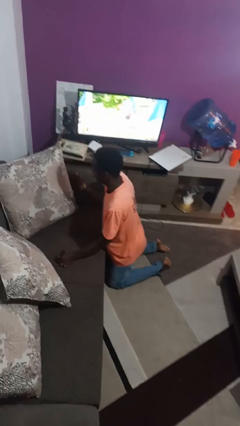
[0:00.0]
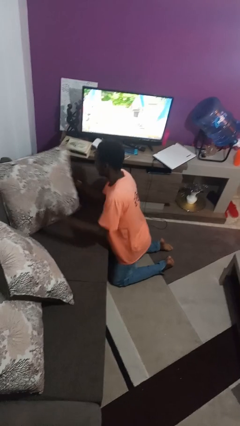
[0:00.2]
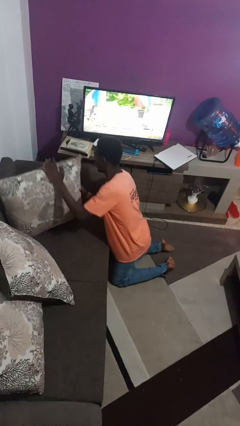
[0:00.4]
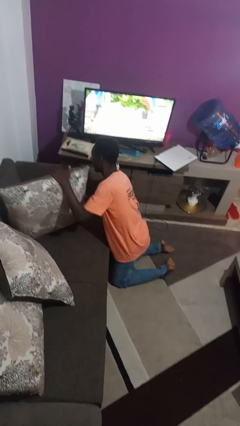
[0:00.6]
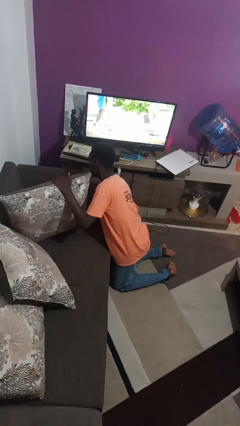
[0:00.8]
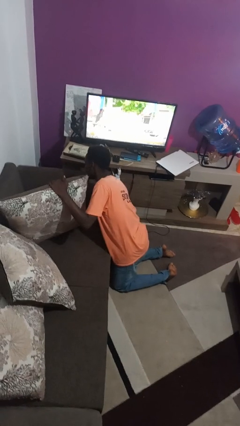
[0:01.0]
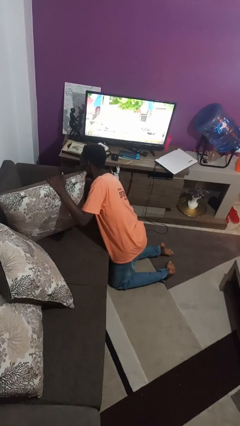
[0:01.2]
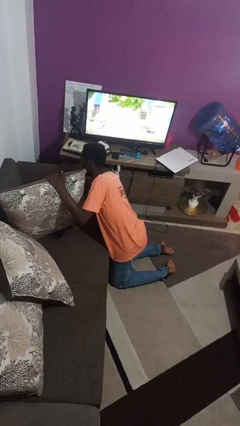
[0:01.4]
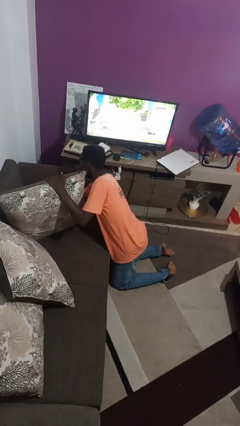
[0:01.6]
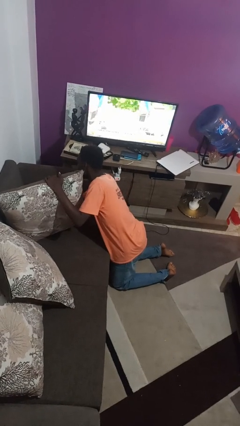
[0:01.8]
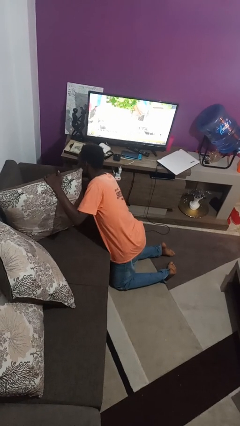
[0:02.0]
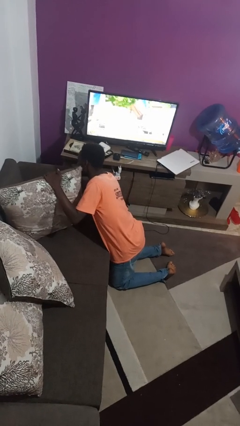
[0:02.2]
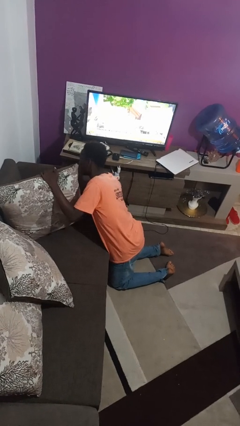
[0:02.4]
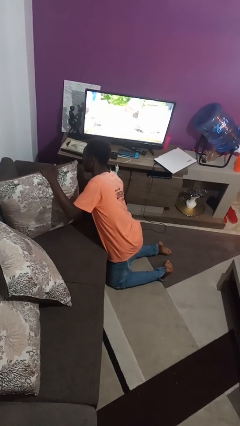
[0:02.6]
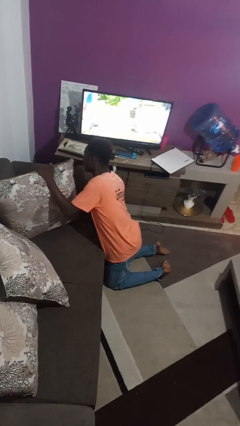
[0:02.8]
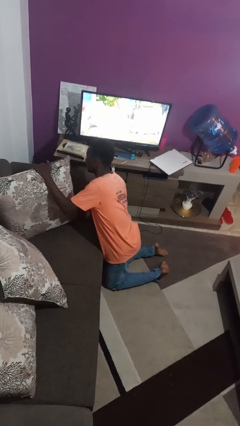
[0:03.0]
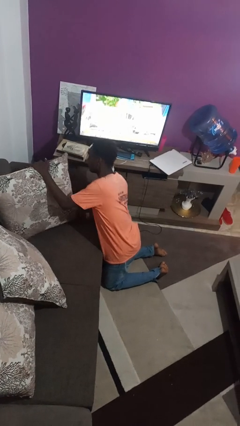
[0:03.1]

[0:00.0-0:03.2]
person searches in couch

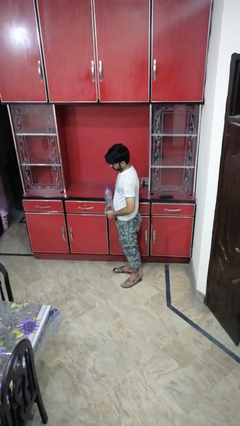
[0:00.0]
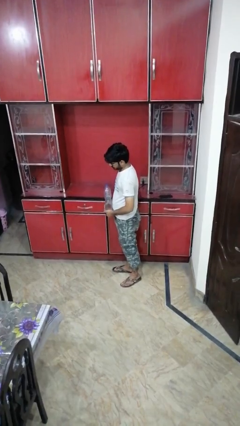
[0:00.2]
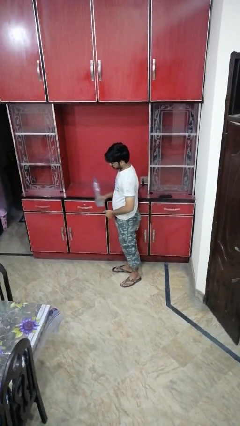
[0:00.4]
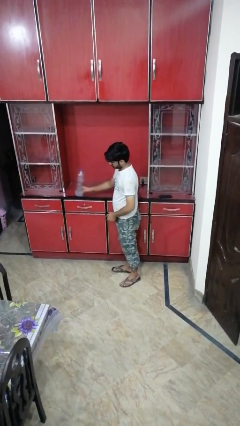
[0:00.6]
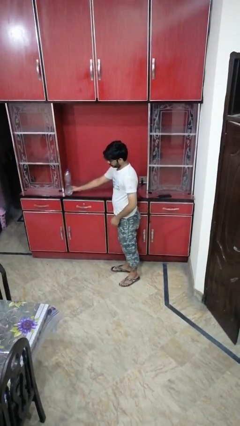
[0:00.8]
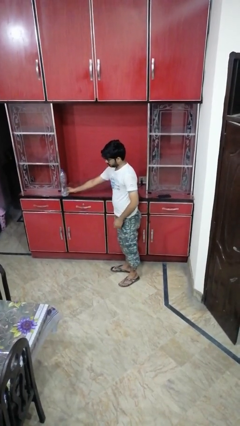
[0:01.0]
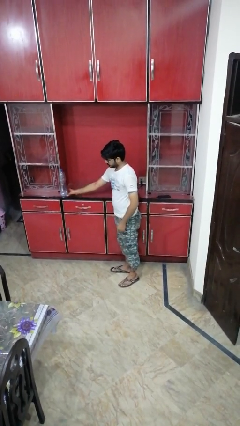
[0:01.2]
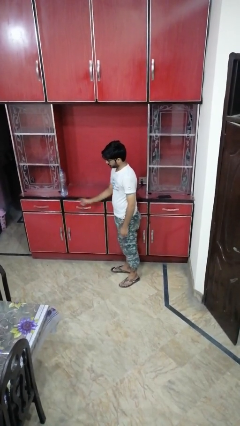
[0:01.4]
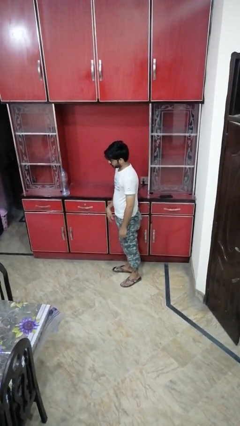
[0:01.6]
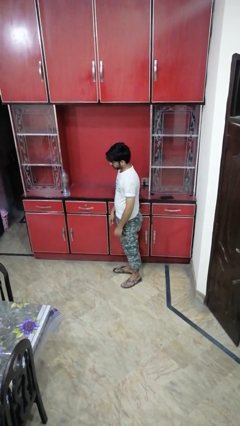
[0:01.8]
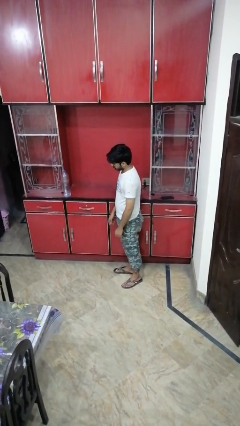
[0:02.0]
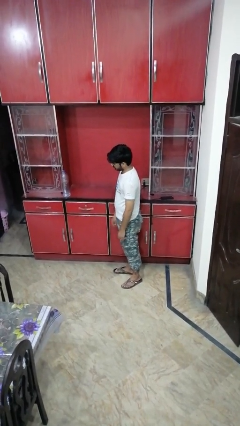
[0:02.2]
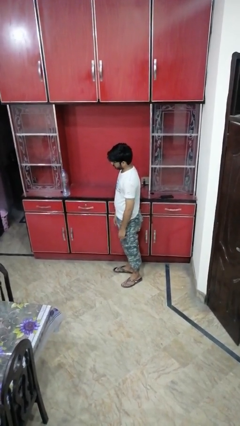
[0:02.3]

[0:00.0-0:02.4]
person puts down object on countertop

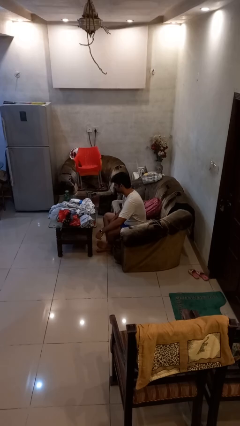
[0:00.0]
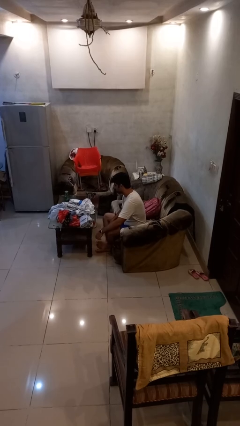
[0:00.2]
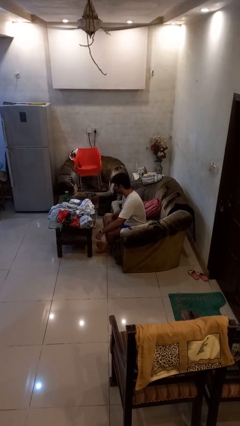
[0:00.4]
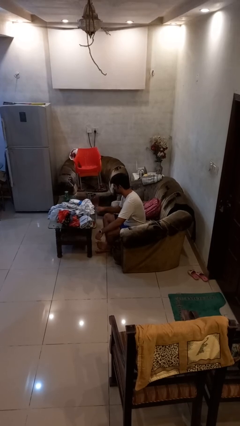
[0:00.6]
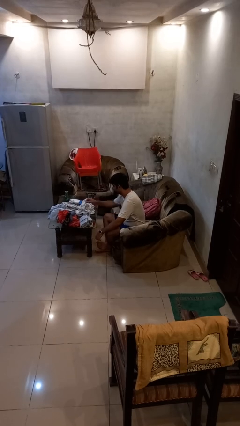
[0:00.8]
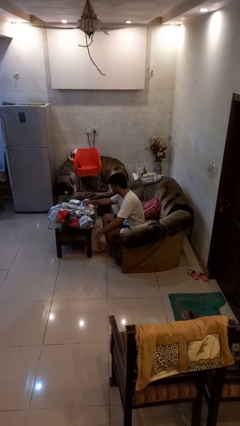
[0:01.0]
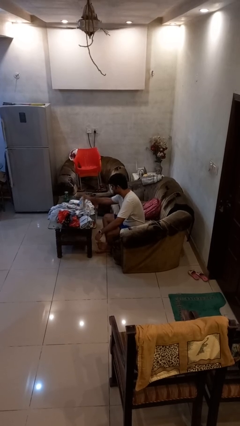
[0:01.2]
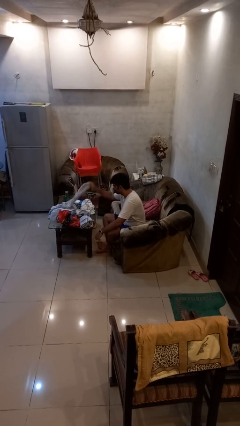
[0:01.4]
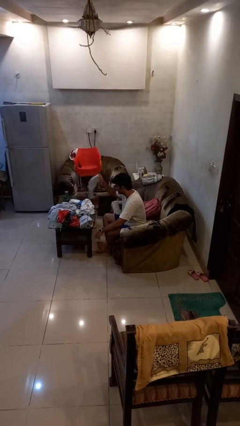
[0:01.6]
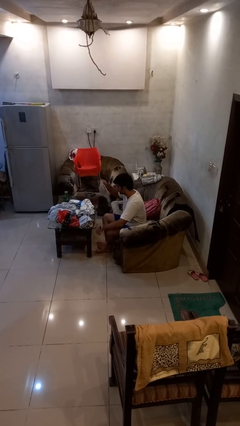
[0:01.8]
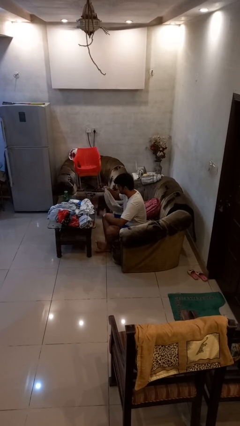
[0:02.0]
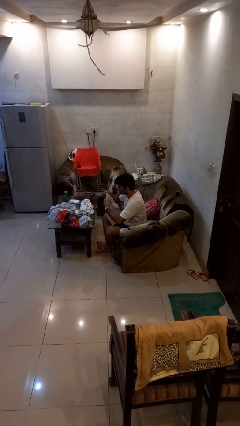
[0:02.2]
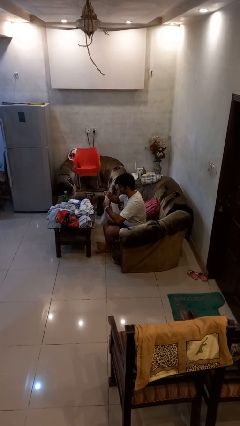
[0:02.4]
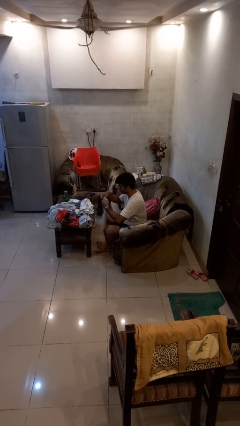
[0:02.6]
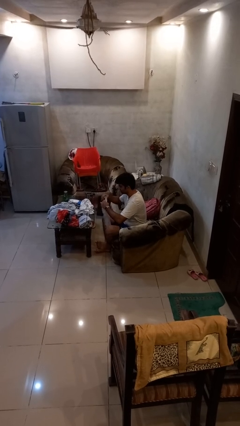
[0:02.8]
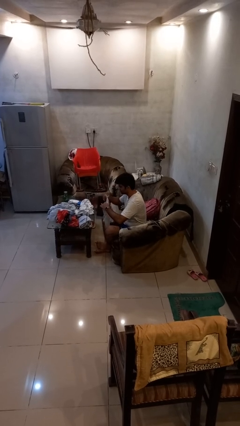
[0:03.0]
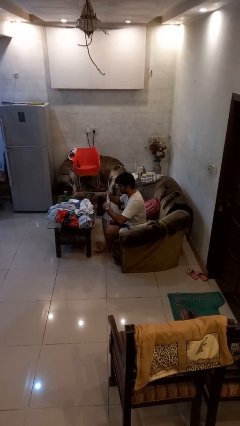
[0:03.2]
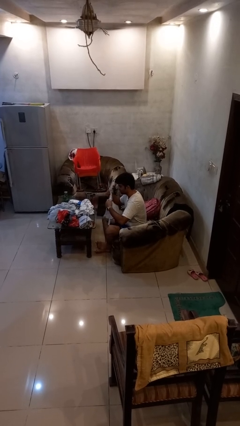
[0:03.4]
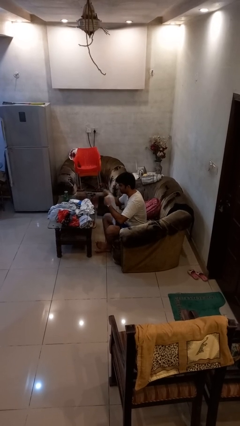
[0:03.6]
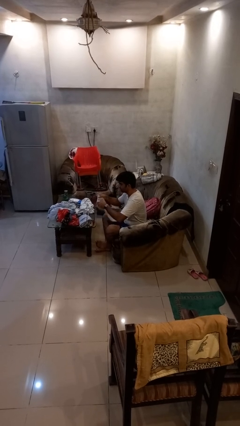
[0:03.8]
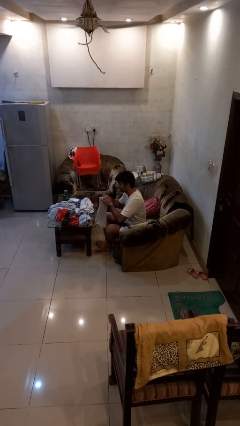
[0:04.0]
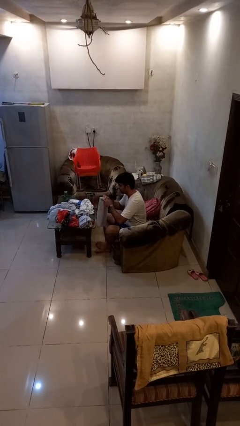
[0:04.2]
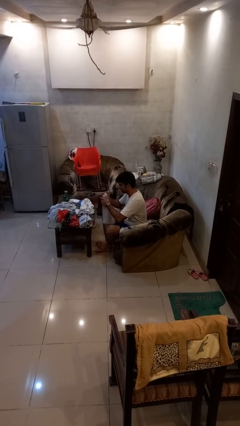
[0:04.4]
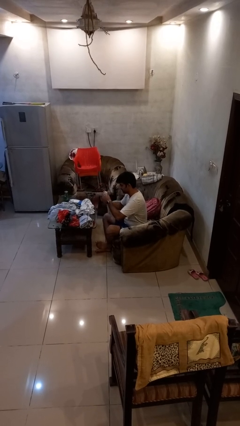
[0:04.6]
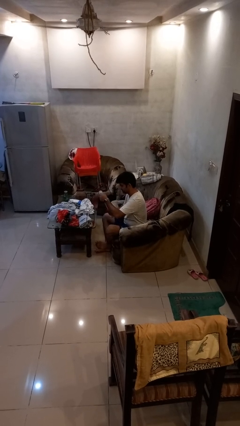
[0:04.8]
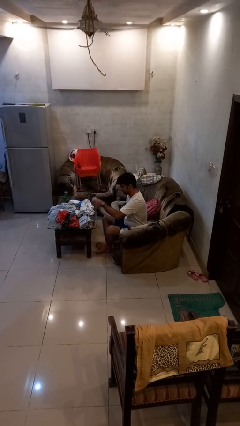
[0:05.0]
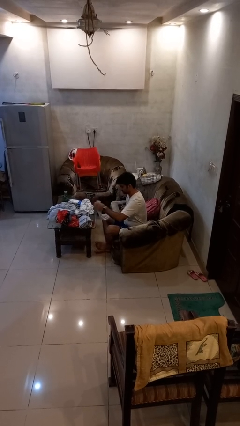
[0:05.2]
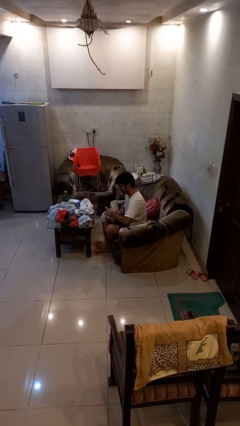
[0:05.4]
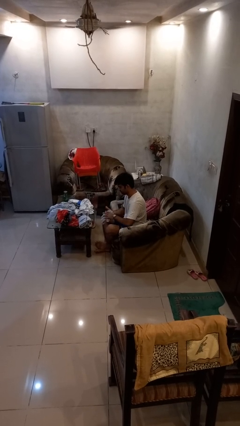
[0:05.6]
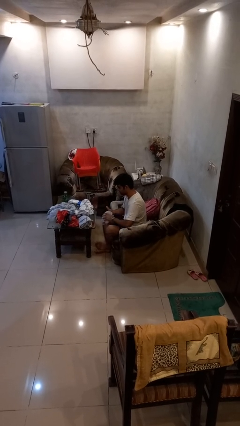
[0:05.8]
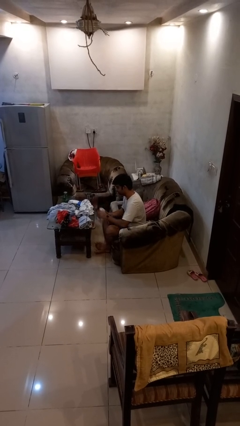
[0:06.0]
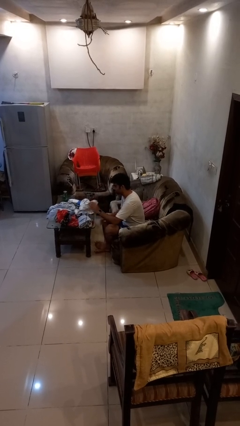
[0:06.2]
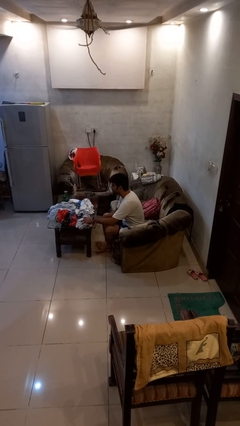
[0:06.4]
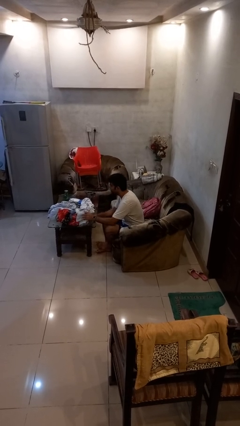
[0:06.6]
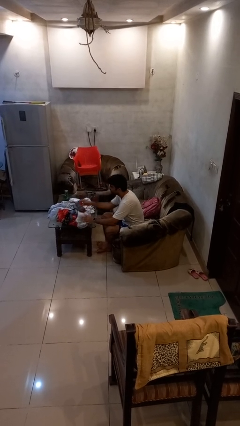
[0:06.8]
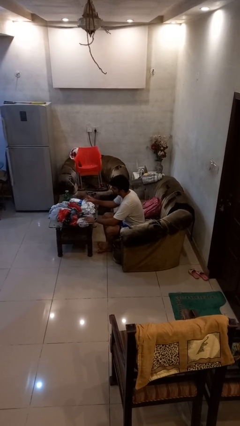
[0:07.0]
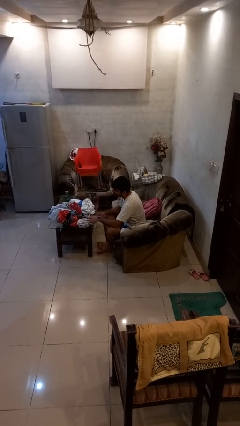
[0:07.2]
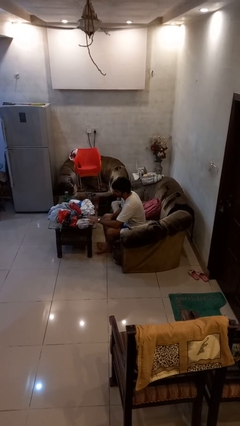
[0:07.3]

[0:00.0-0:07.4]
person folds pants

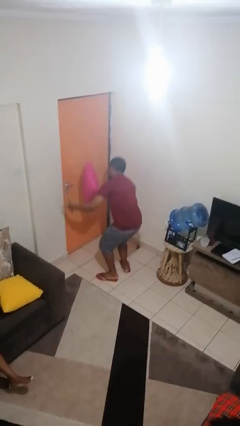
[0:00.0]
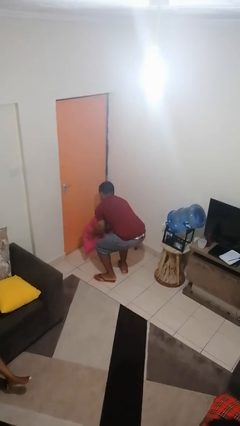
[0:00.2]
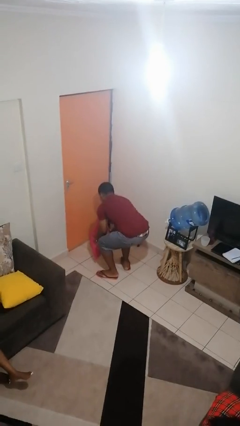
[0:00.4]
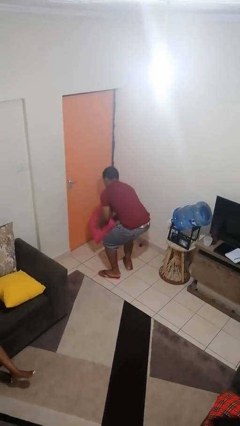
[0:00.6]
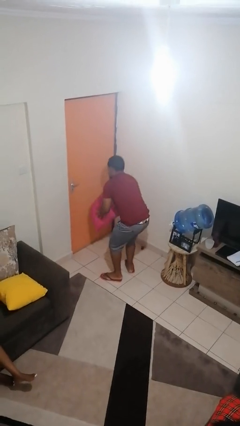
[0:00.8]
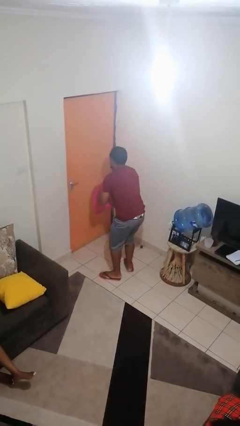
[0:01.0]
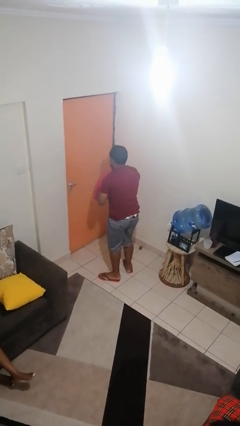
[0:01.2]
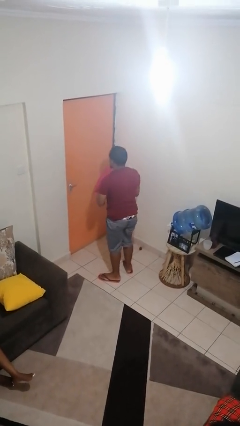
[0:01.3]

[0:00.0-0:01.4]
person catches dropped object

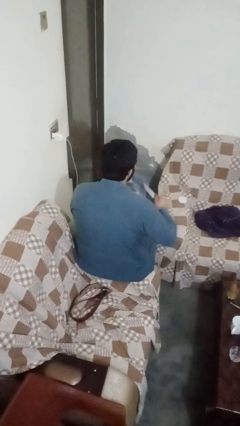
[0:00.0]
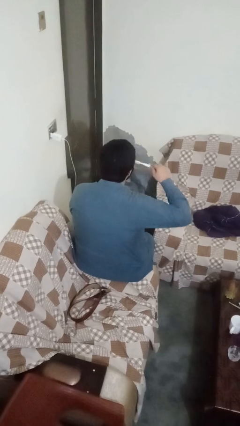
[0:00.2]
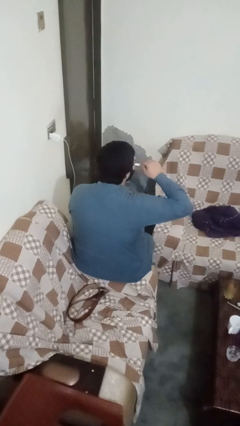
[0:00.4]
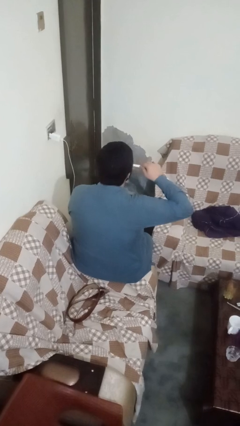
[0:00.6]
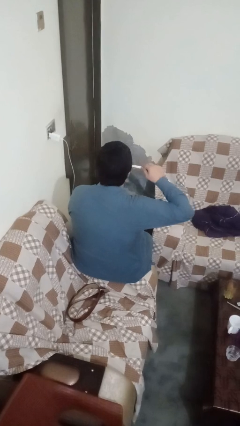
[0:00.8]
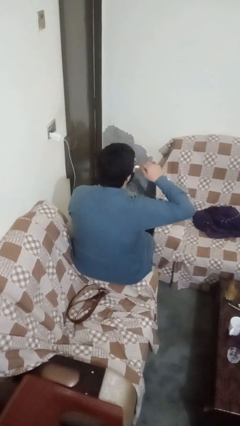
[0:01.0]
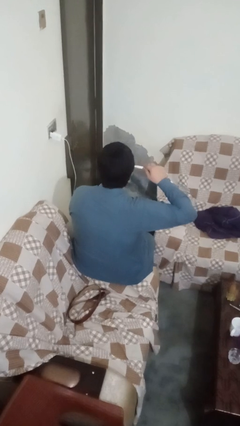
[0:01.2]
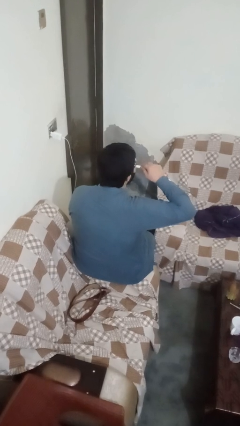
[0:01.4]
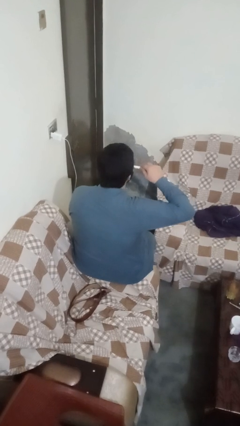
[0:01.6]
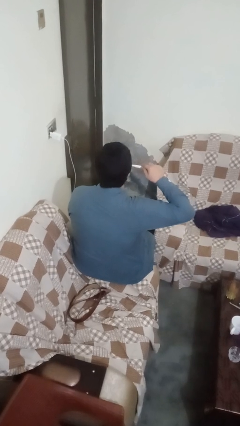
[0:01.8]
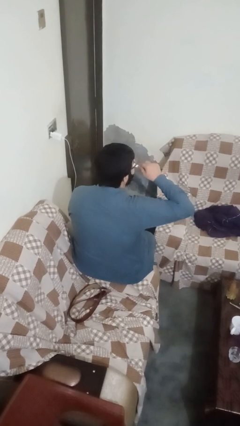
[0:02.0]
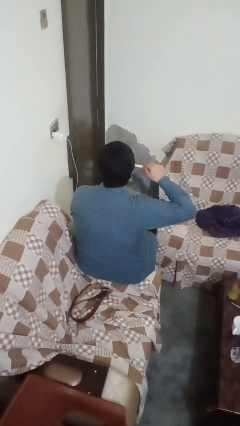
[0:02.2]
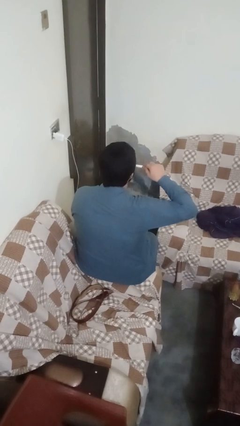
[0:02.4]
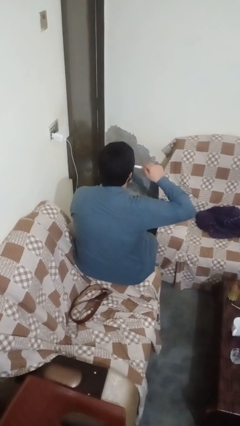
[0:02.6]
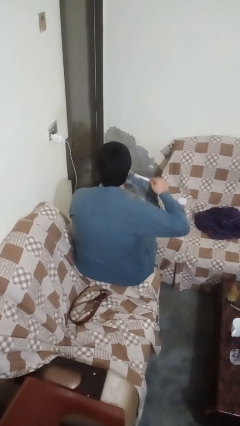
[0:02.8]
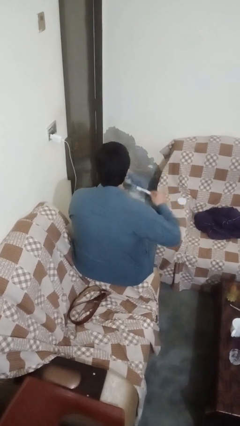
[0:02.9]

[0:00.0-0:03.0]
person brushes teeth

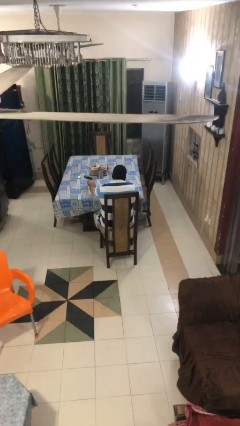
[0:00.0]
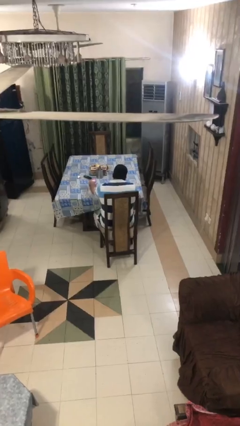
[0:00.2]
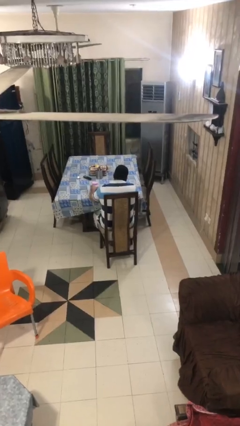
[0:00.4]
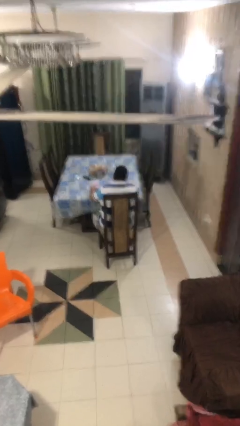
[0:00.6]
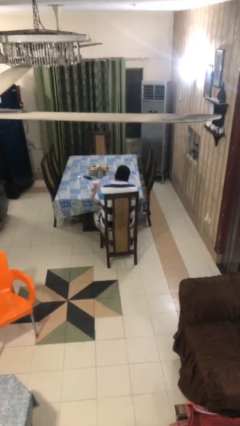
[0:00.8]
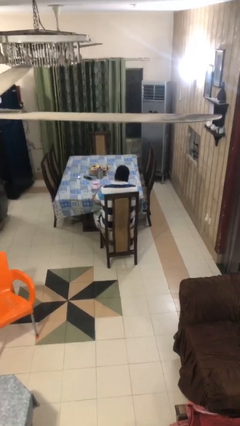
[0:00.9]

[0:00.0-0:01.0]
person sets upright glass
